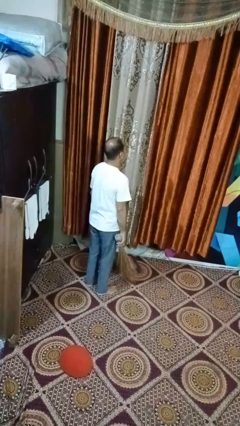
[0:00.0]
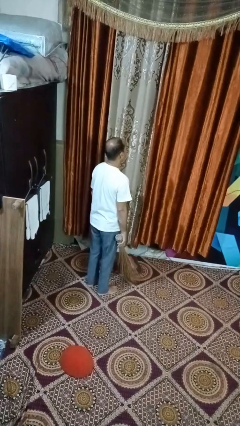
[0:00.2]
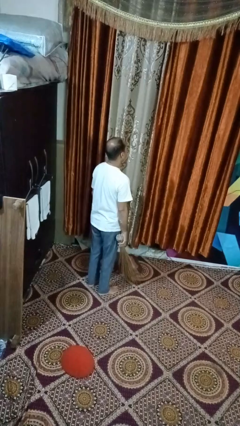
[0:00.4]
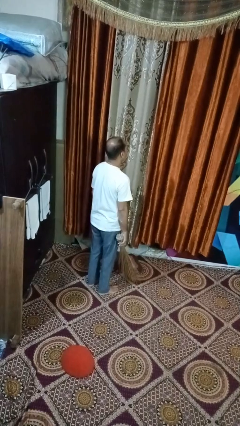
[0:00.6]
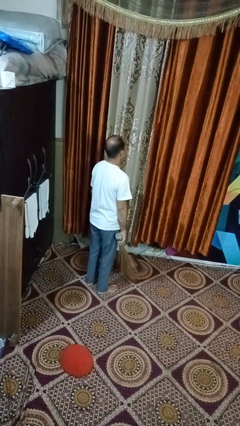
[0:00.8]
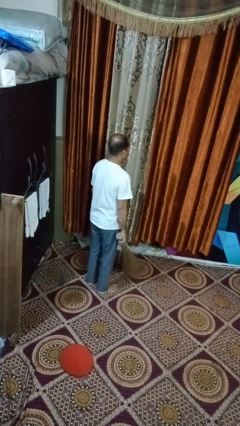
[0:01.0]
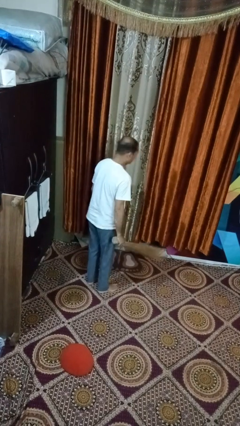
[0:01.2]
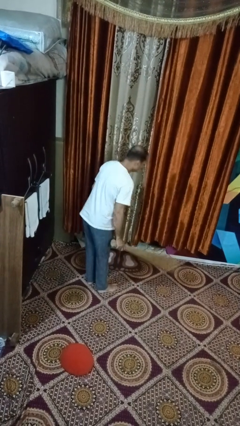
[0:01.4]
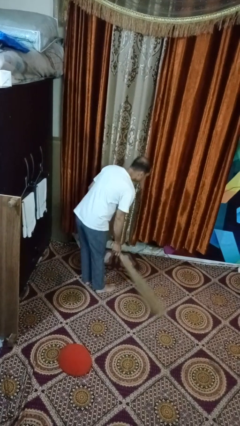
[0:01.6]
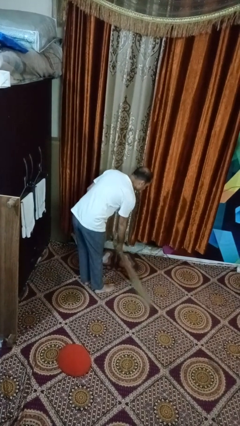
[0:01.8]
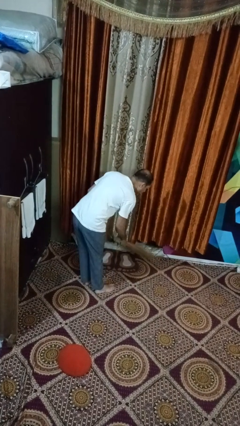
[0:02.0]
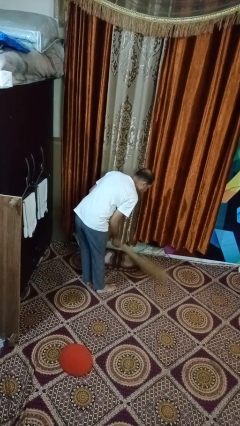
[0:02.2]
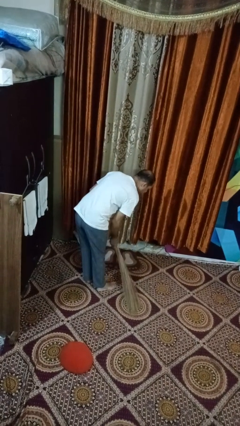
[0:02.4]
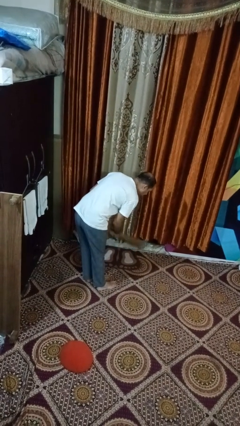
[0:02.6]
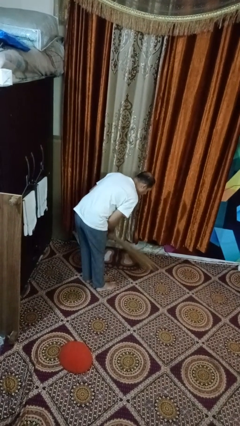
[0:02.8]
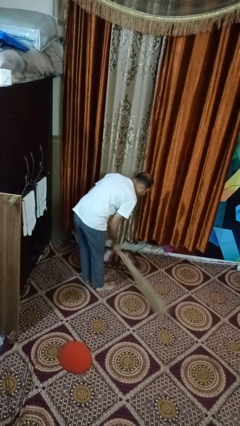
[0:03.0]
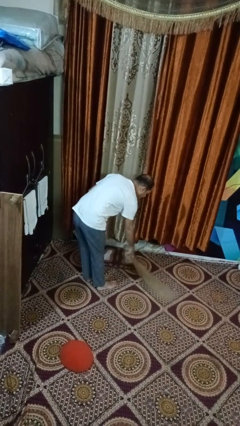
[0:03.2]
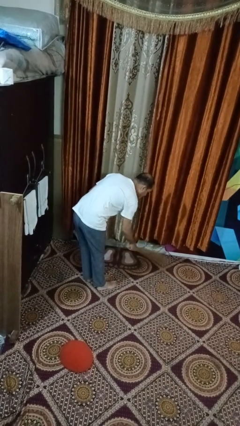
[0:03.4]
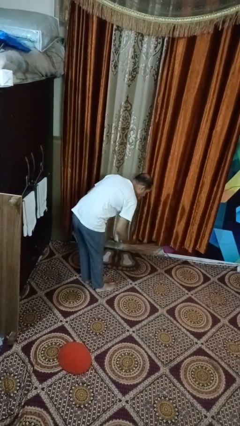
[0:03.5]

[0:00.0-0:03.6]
person sweeps floor

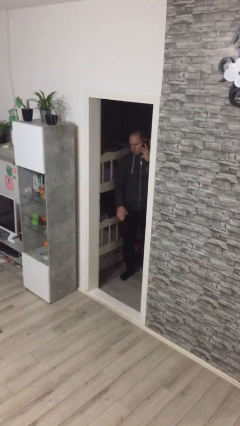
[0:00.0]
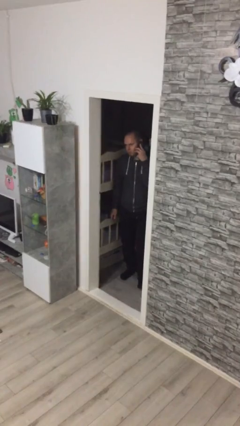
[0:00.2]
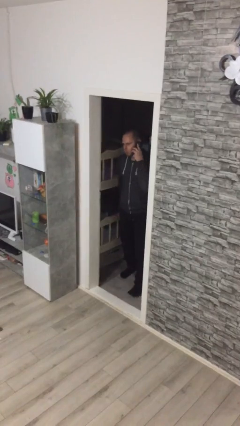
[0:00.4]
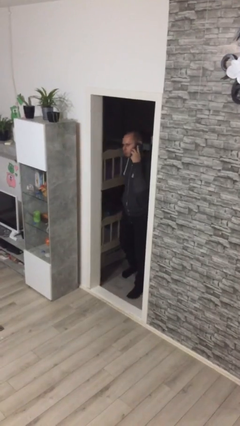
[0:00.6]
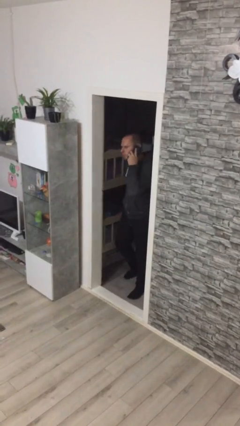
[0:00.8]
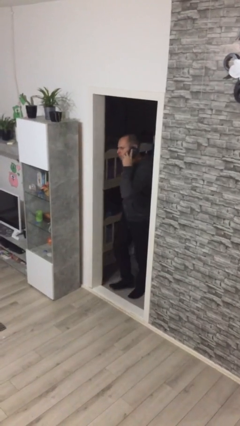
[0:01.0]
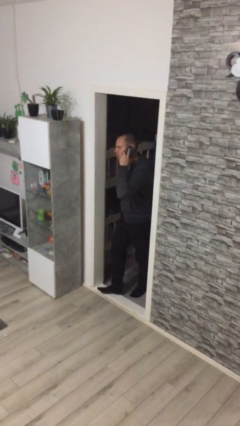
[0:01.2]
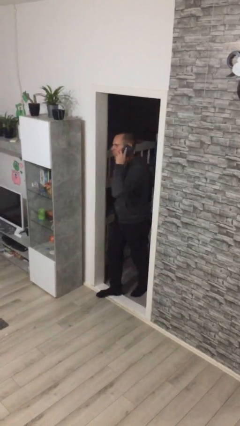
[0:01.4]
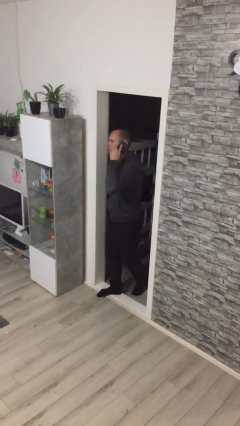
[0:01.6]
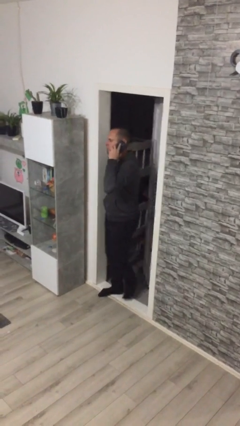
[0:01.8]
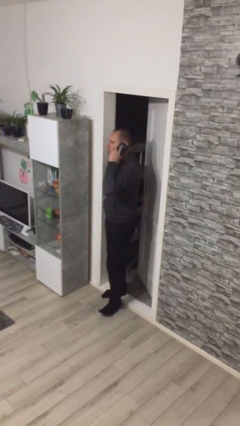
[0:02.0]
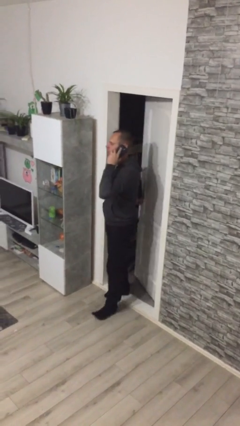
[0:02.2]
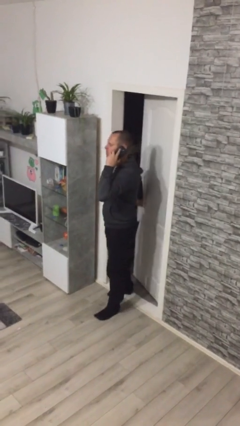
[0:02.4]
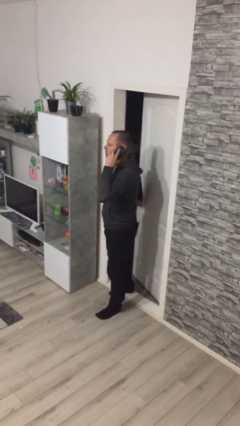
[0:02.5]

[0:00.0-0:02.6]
person enters scene through structure

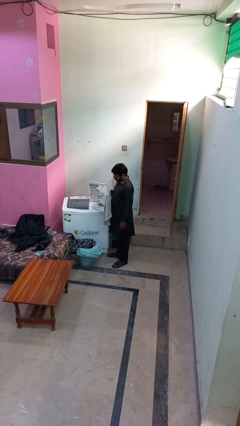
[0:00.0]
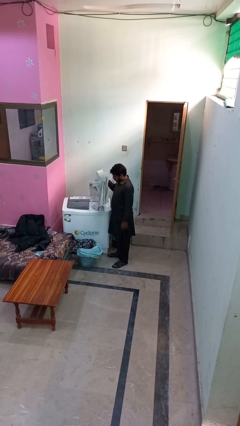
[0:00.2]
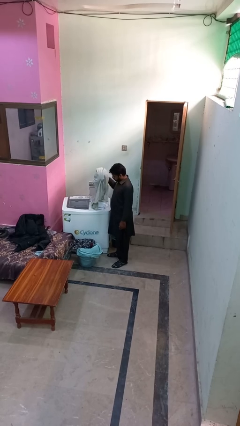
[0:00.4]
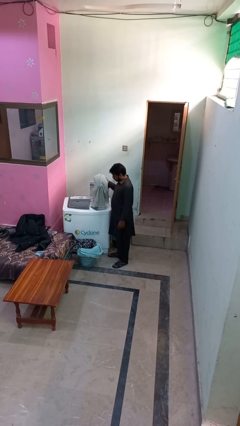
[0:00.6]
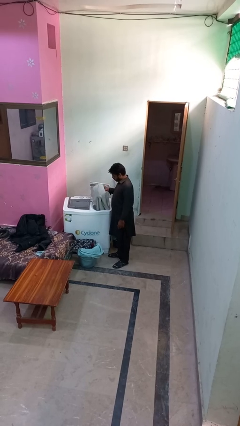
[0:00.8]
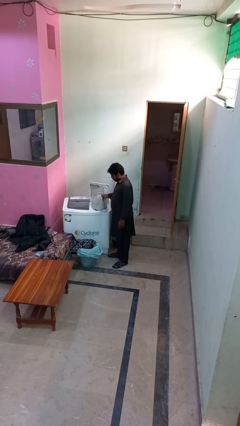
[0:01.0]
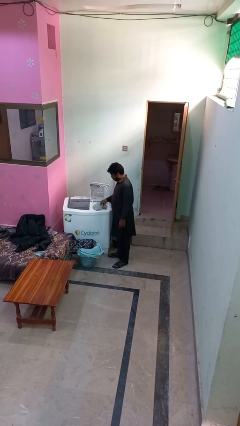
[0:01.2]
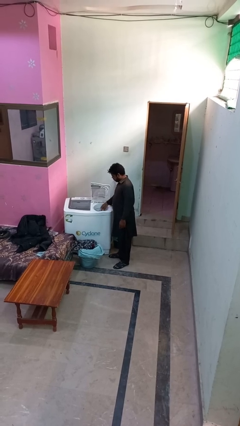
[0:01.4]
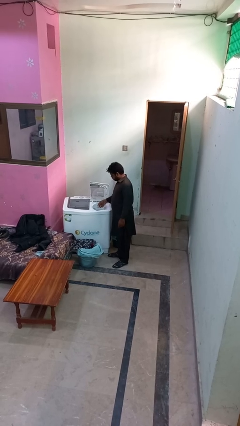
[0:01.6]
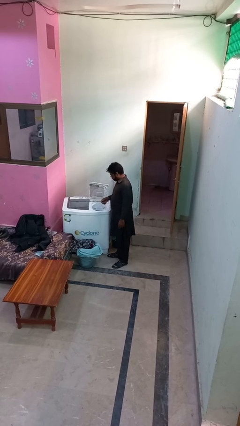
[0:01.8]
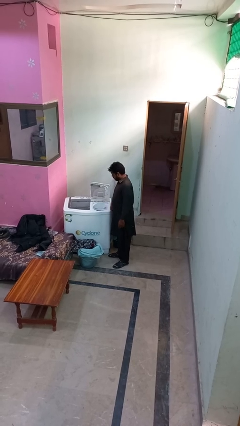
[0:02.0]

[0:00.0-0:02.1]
person loads dryer

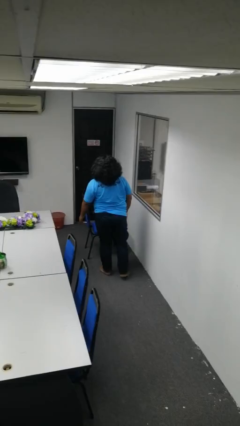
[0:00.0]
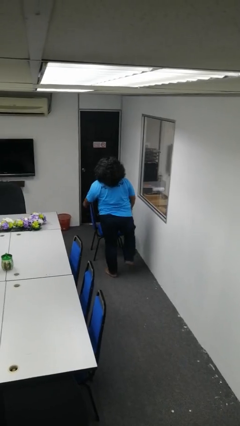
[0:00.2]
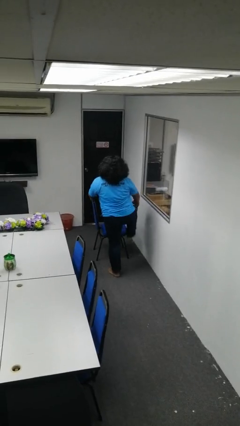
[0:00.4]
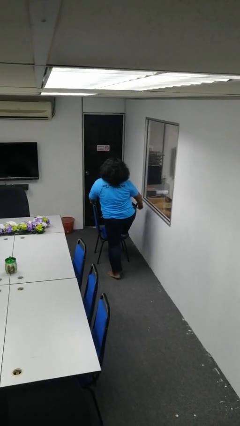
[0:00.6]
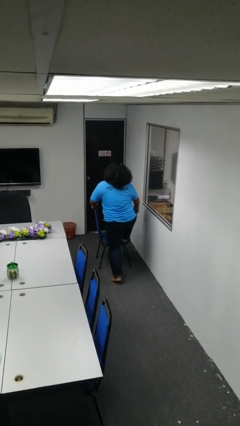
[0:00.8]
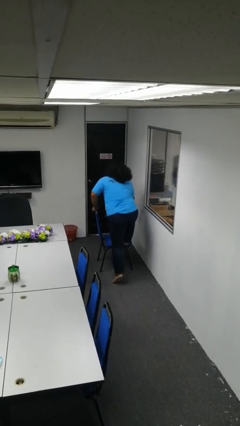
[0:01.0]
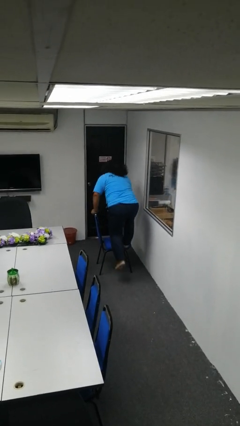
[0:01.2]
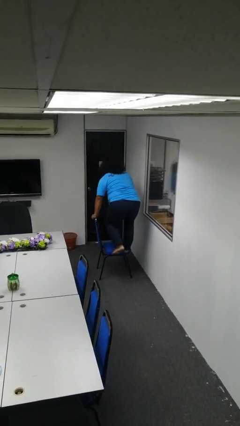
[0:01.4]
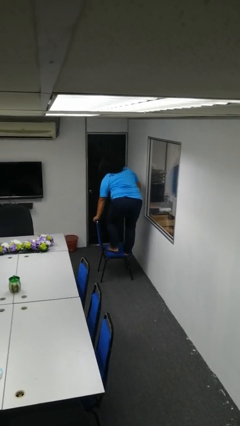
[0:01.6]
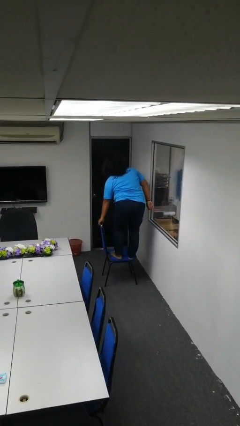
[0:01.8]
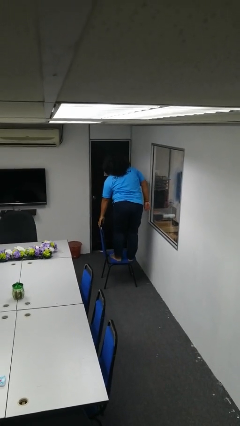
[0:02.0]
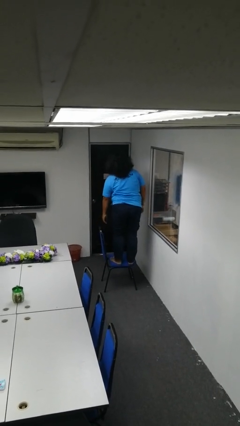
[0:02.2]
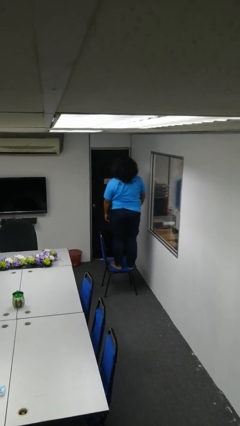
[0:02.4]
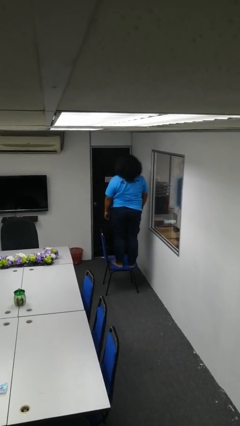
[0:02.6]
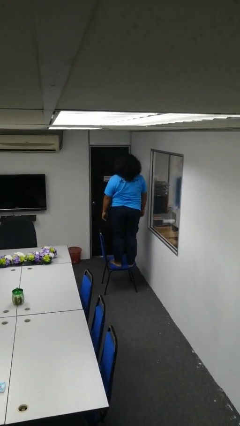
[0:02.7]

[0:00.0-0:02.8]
person climbs on chair

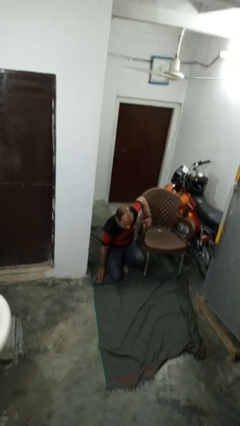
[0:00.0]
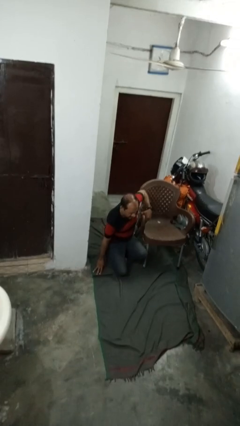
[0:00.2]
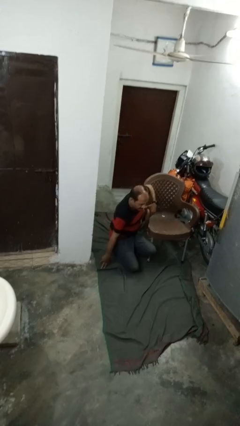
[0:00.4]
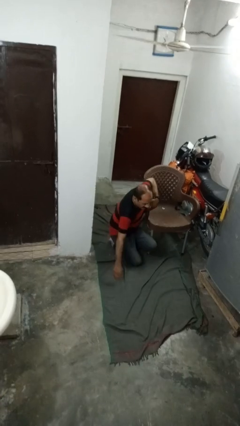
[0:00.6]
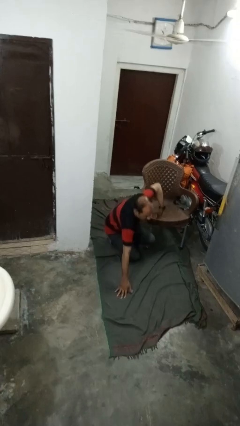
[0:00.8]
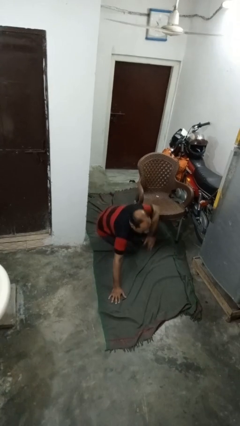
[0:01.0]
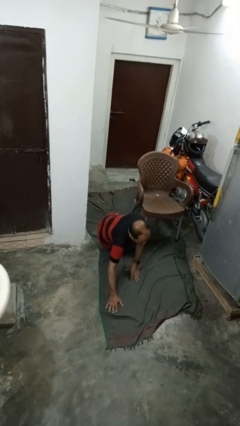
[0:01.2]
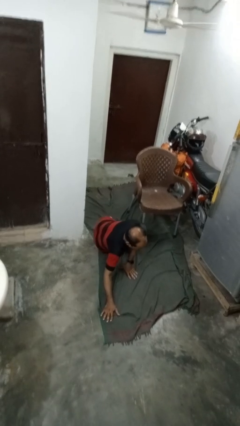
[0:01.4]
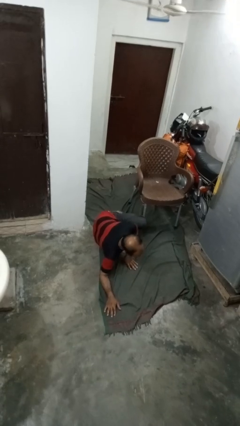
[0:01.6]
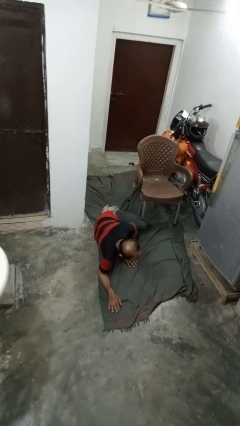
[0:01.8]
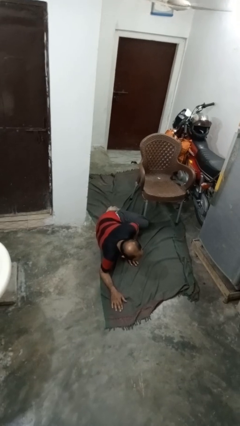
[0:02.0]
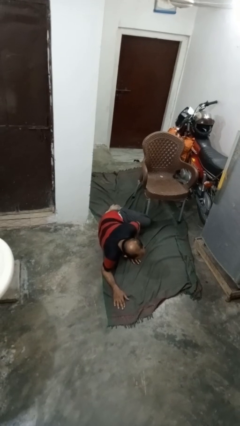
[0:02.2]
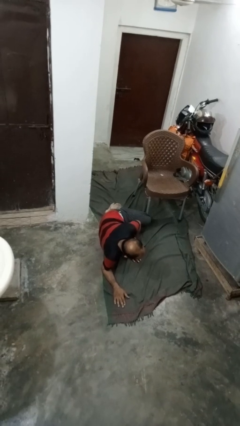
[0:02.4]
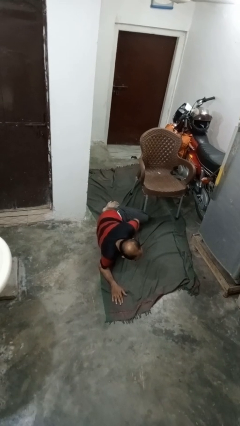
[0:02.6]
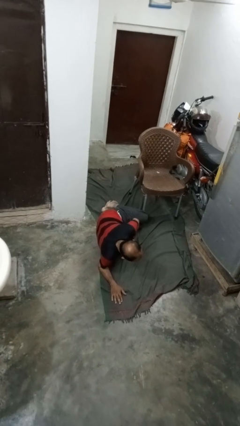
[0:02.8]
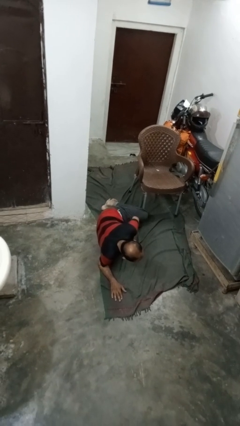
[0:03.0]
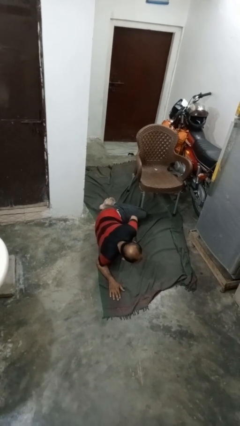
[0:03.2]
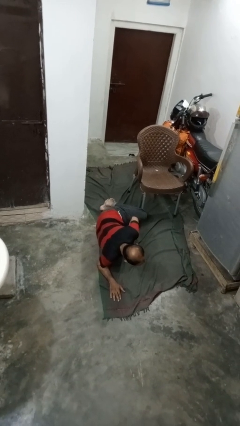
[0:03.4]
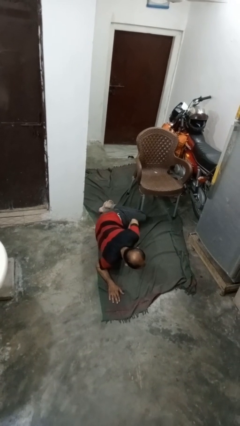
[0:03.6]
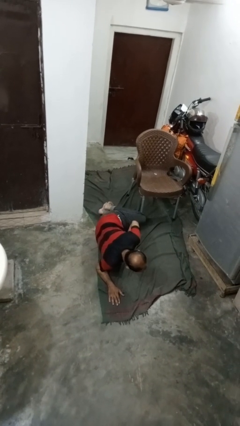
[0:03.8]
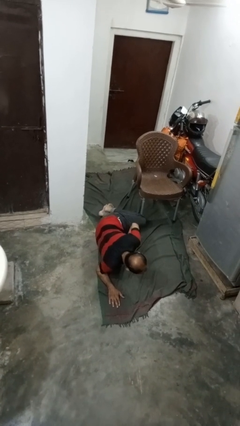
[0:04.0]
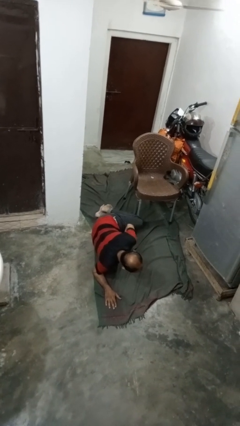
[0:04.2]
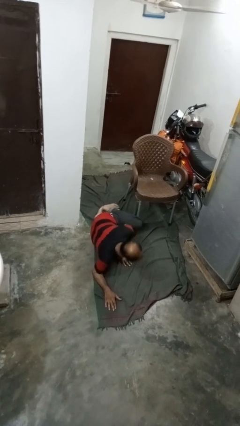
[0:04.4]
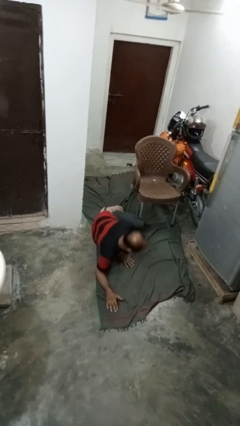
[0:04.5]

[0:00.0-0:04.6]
person lies down on floor

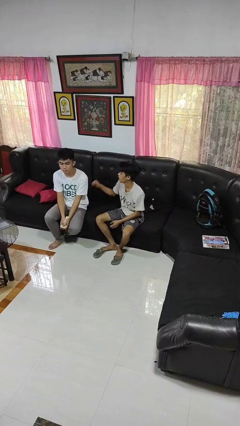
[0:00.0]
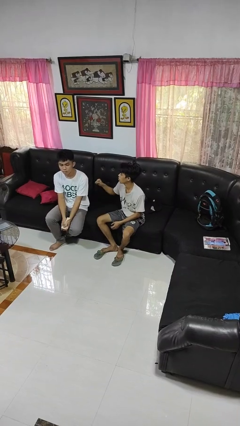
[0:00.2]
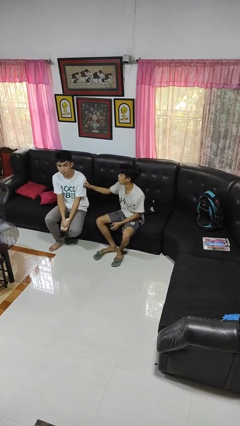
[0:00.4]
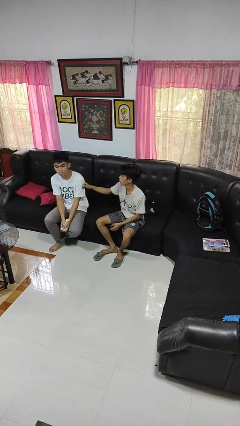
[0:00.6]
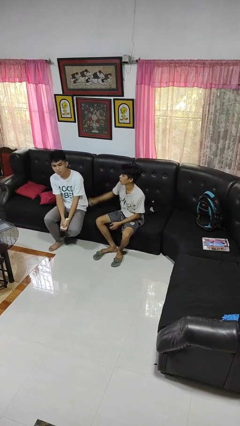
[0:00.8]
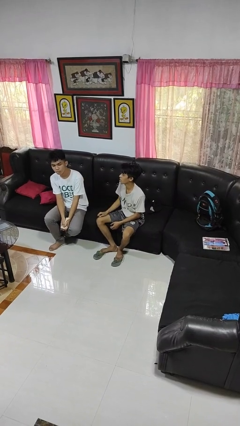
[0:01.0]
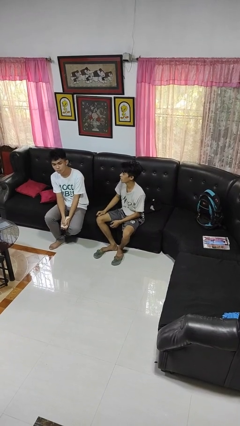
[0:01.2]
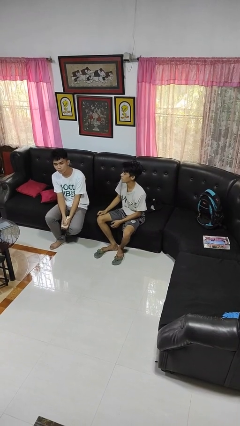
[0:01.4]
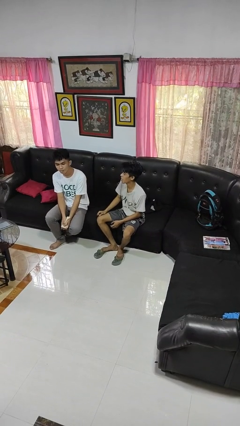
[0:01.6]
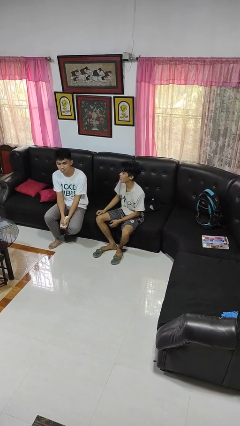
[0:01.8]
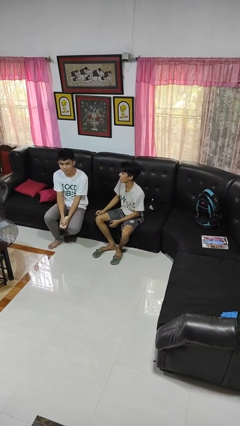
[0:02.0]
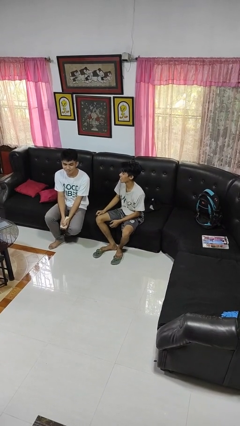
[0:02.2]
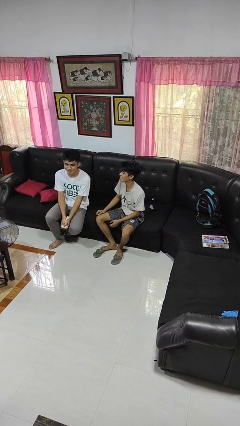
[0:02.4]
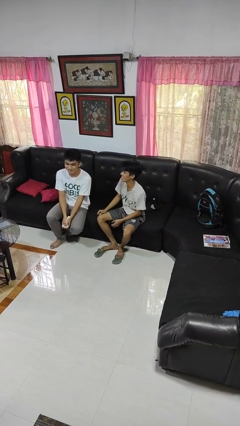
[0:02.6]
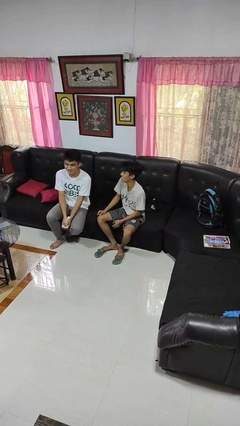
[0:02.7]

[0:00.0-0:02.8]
person pounds shoulders of person
